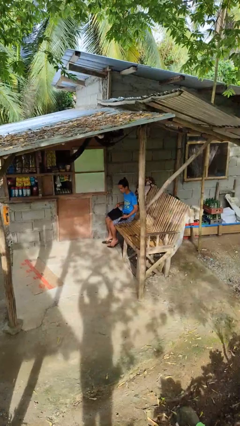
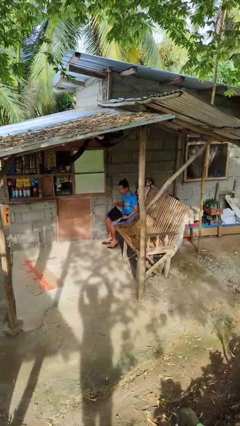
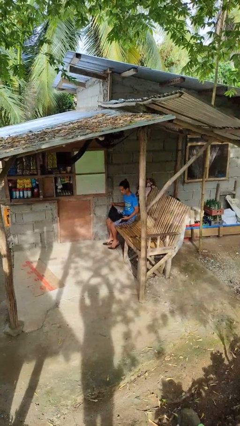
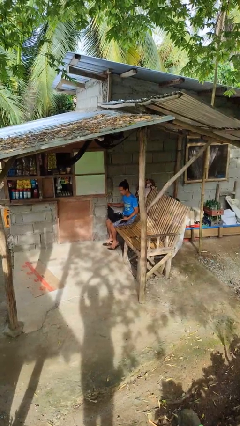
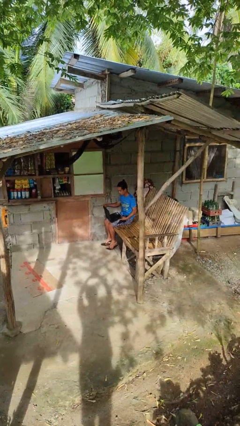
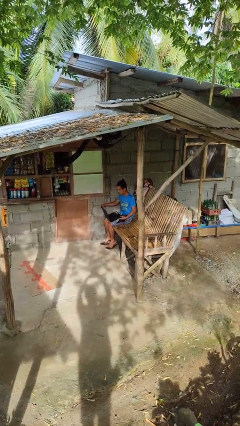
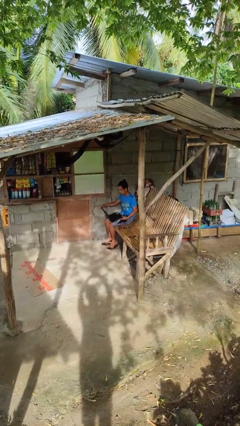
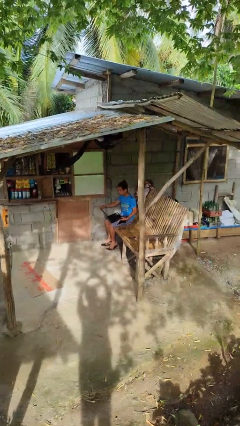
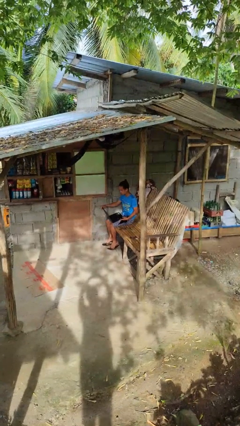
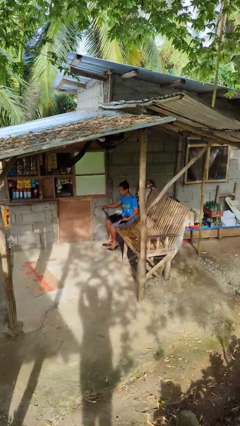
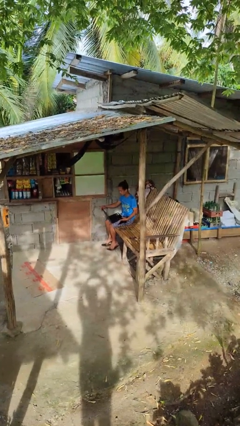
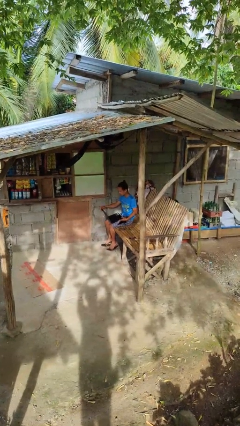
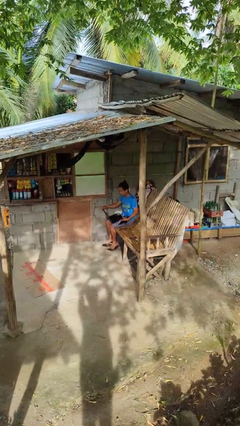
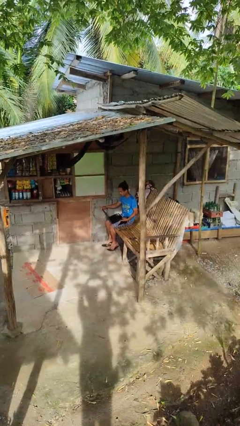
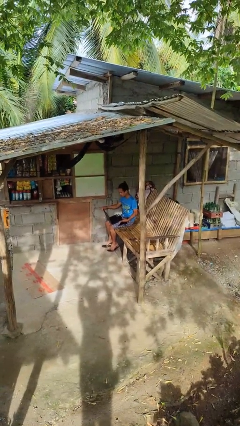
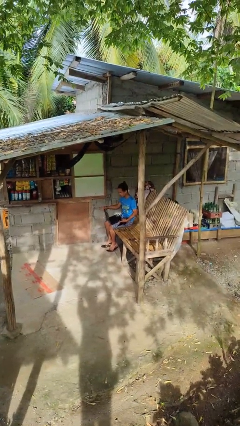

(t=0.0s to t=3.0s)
person opens laptop

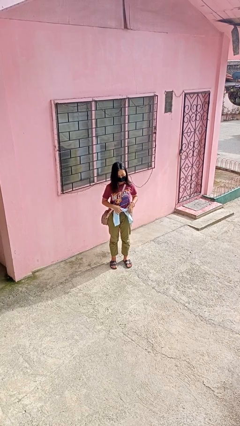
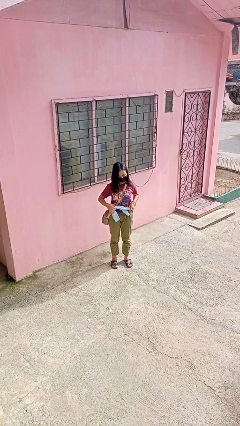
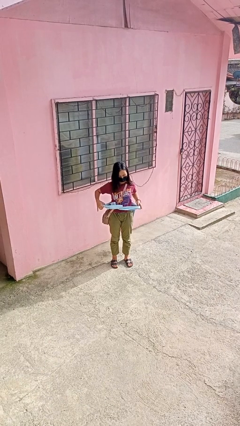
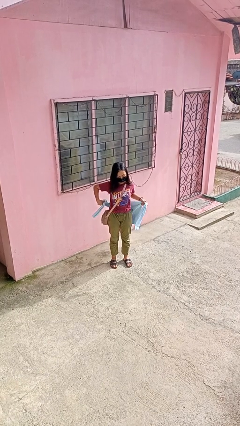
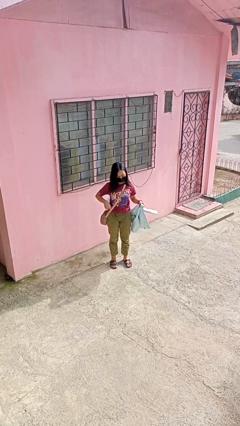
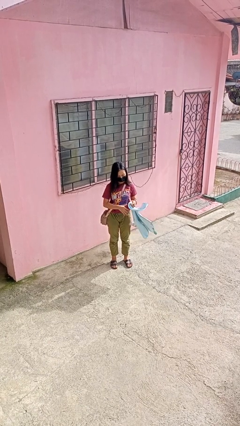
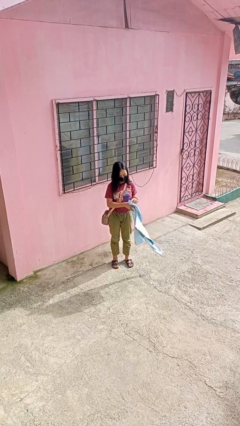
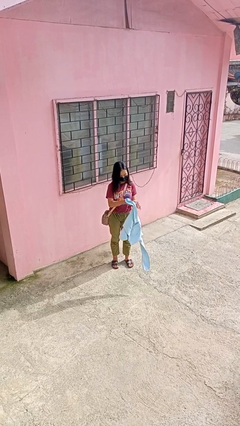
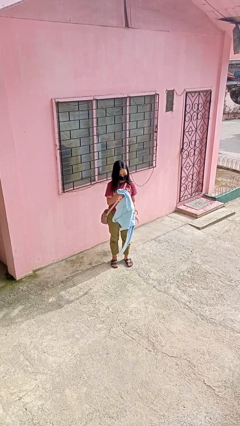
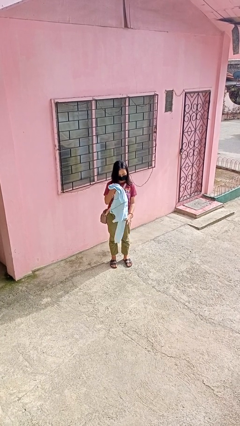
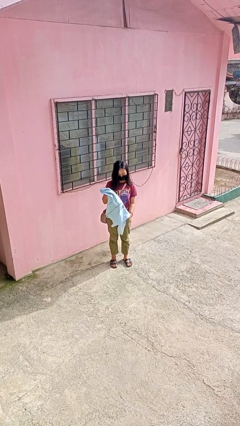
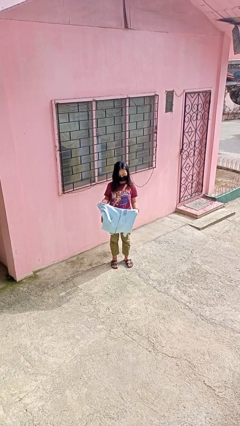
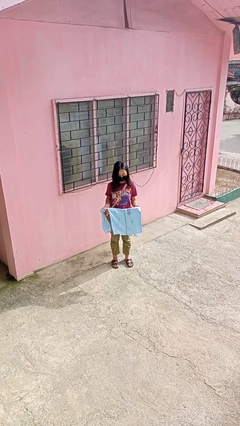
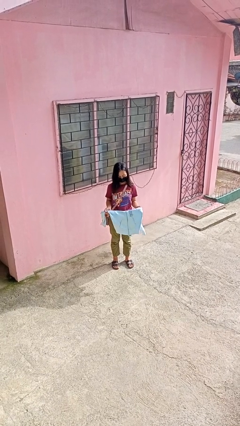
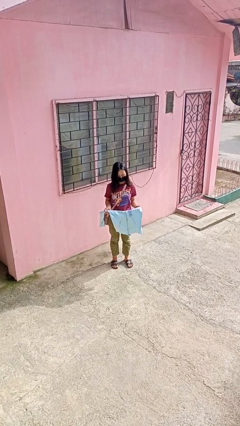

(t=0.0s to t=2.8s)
person unties jacket around waist

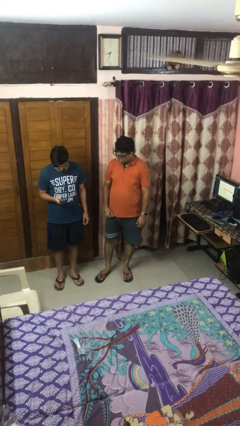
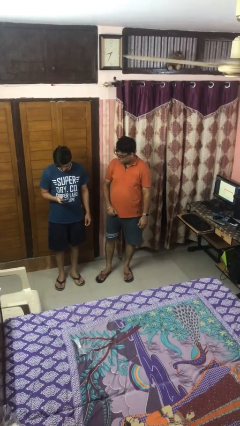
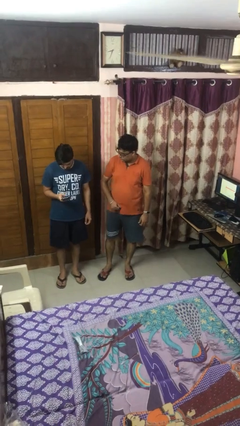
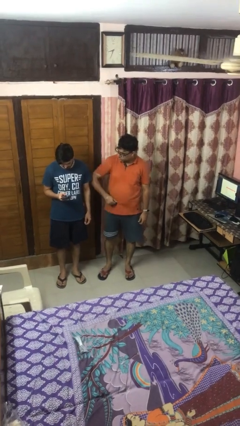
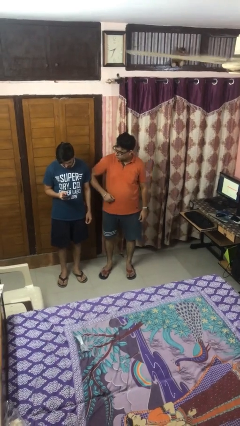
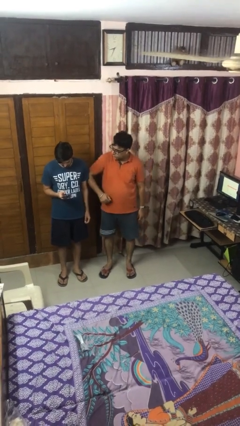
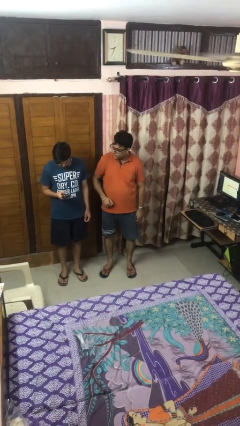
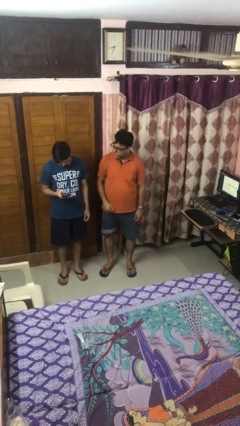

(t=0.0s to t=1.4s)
person nudges person with elbow

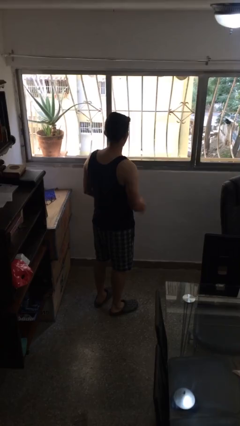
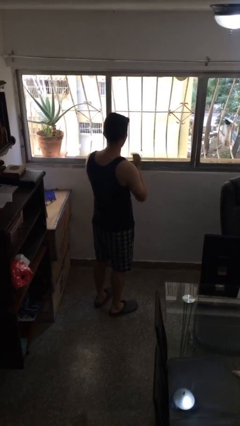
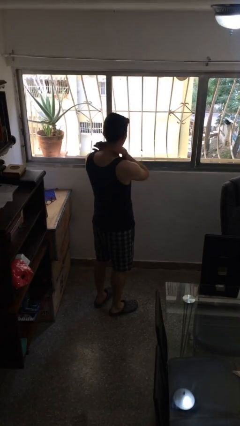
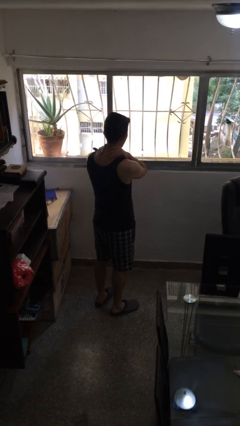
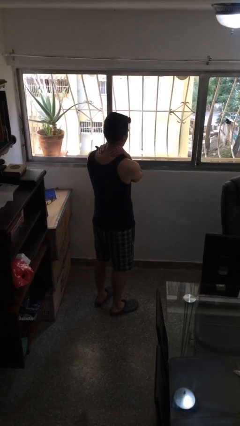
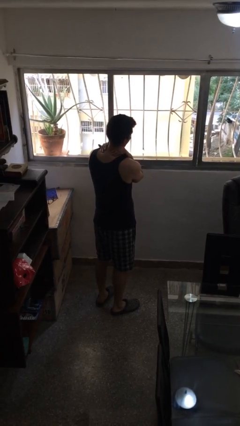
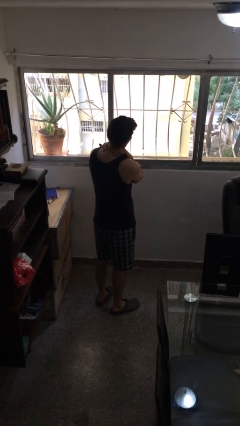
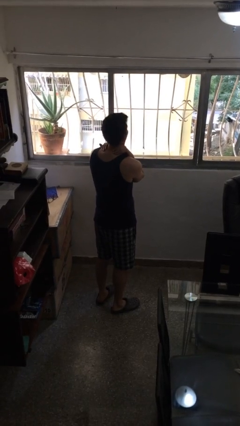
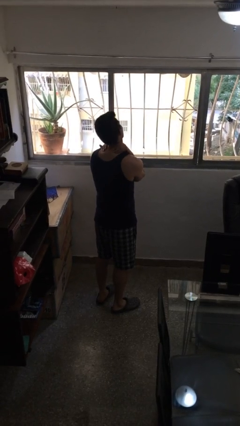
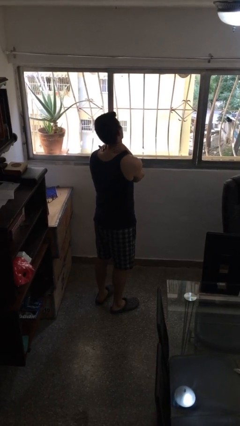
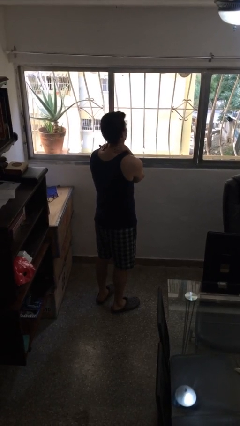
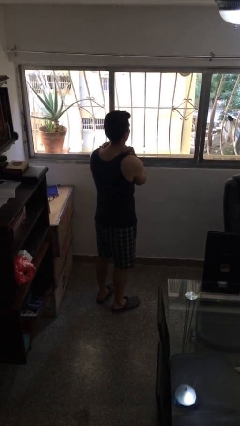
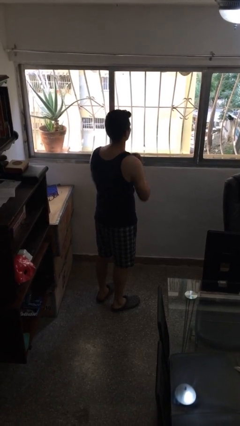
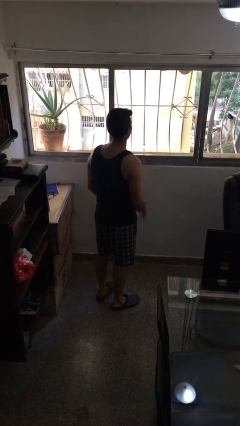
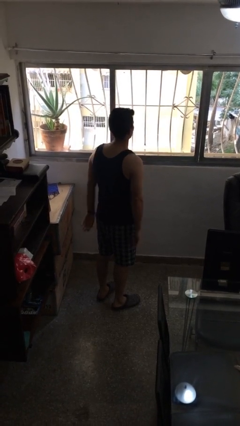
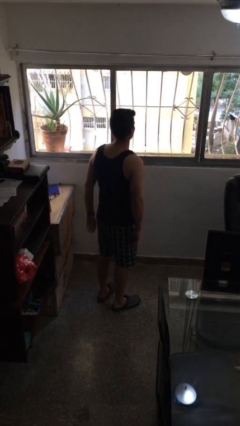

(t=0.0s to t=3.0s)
person rubs neck

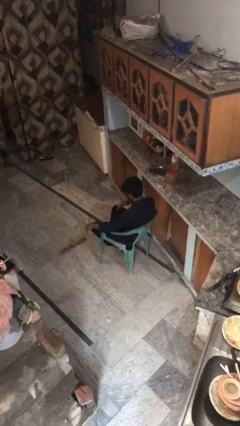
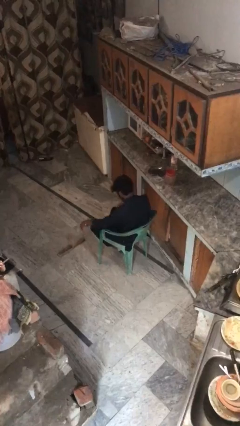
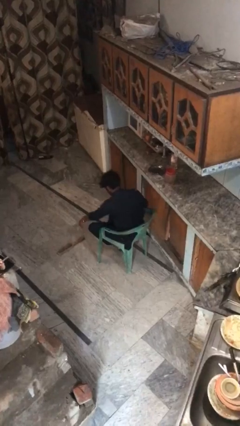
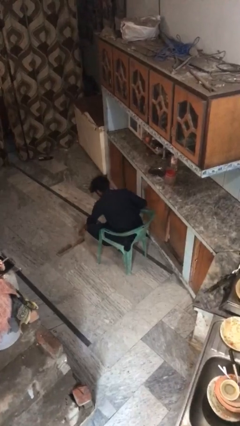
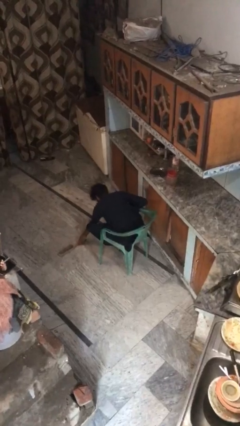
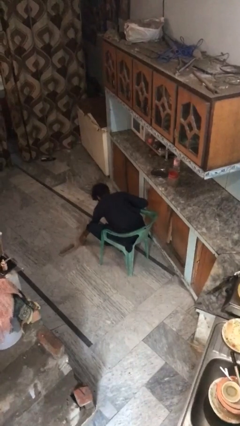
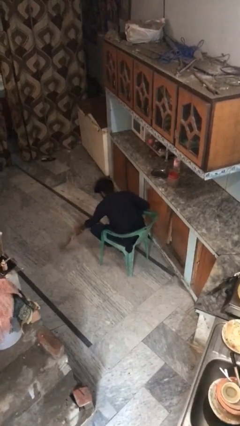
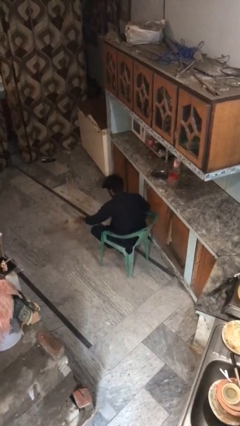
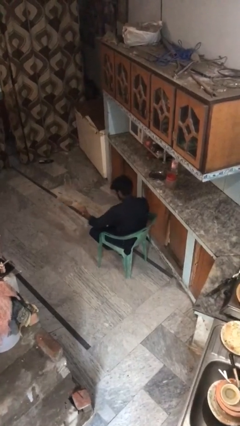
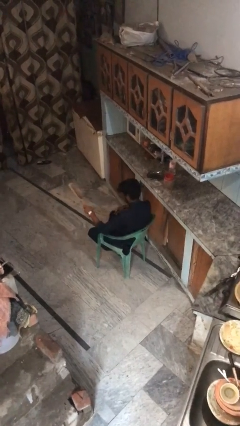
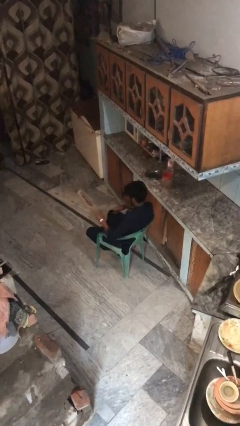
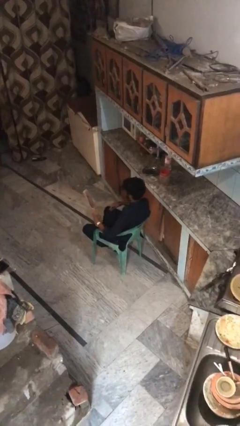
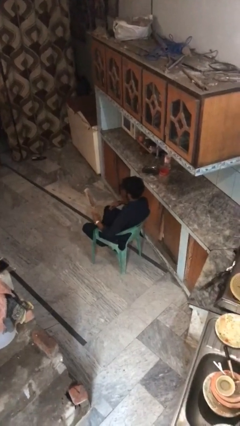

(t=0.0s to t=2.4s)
person picks up object from floor

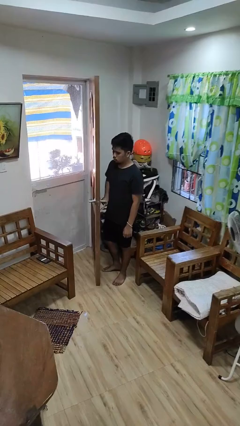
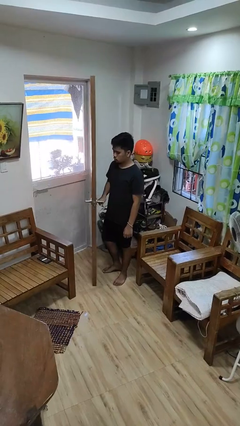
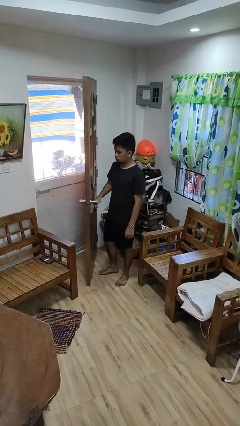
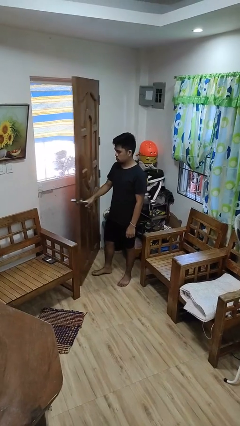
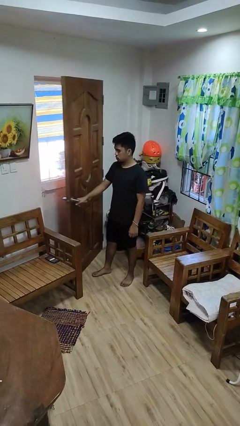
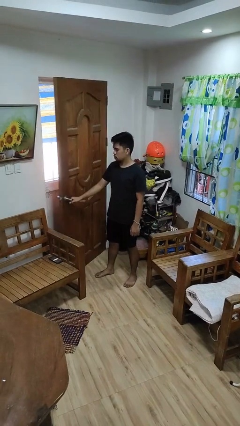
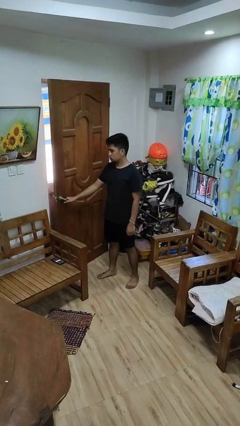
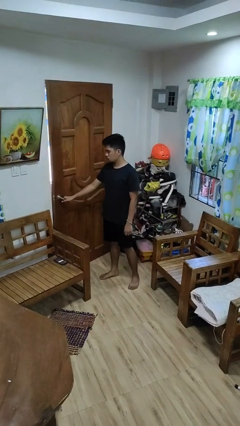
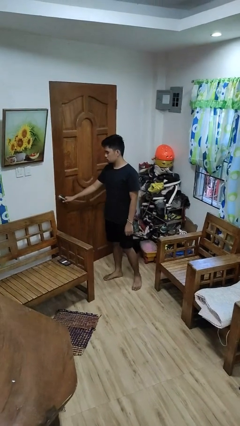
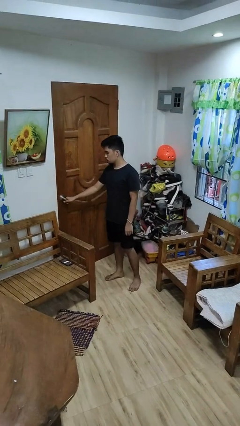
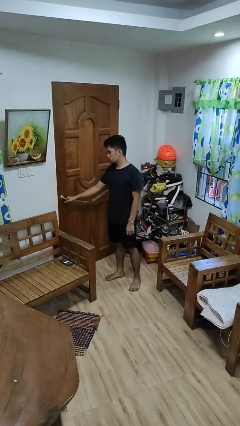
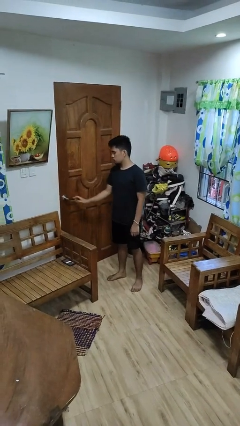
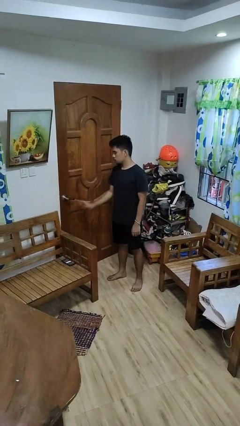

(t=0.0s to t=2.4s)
person closes facility door

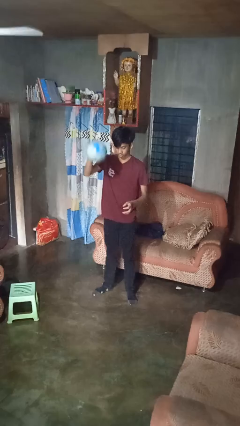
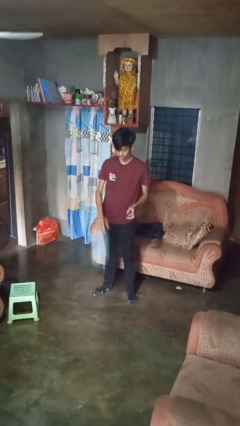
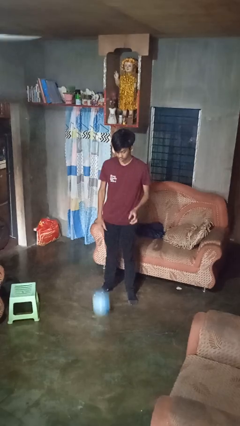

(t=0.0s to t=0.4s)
person bounces ball on floor

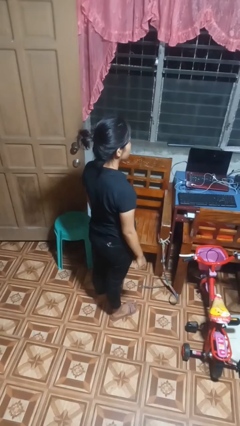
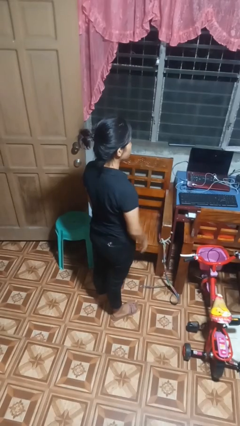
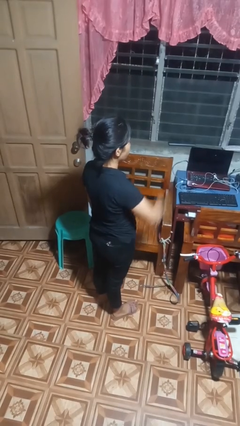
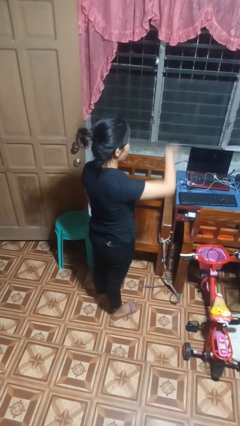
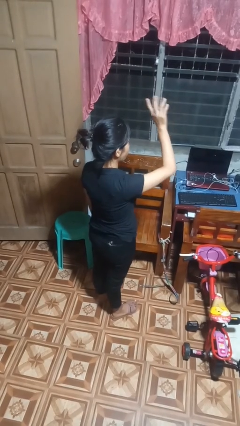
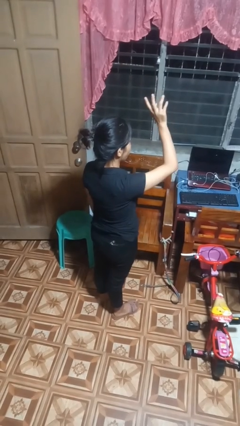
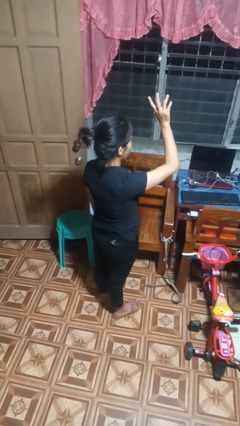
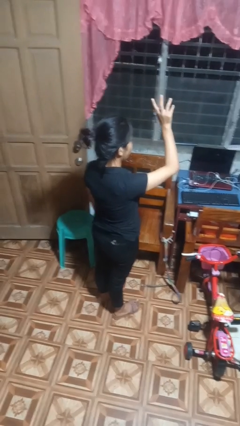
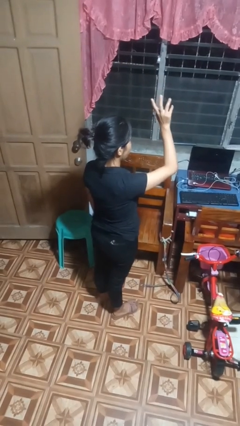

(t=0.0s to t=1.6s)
person gestures swipe up
